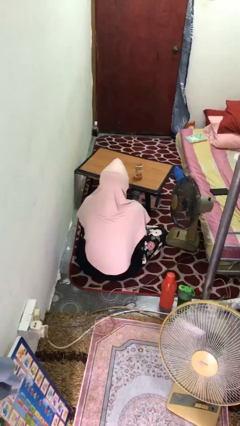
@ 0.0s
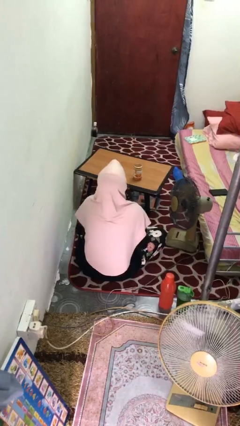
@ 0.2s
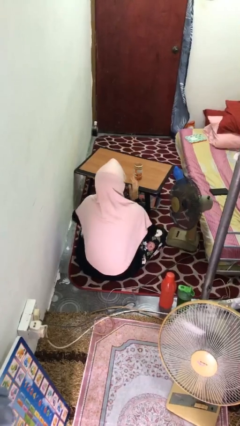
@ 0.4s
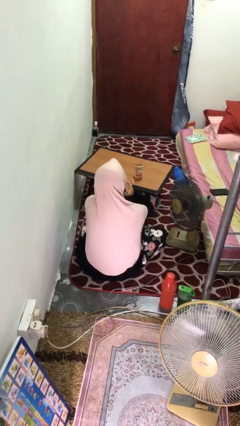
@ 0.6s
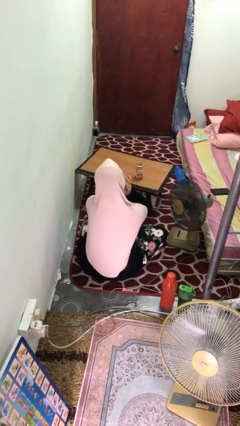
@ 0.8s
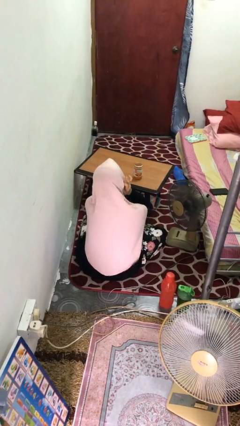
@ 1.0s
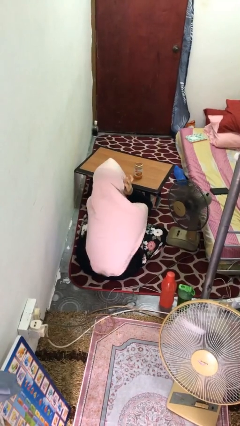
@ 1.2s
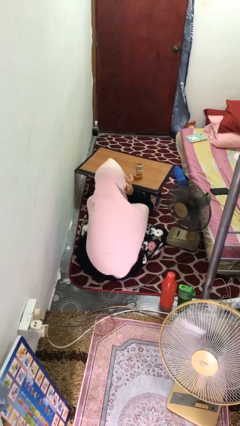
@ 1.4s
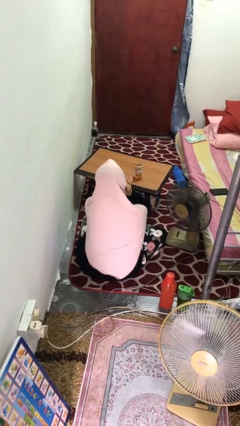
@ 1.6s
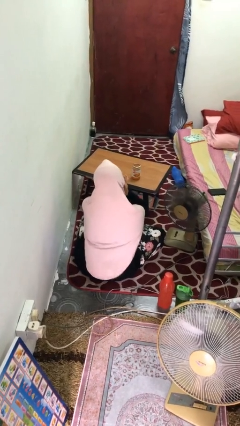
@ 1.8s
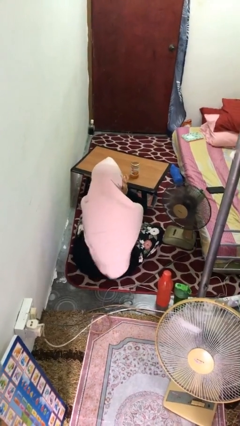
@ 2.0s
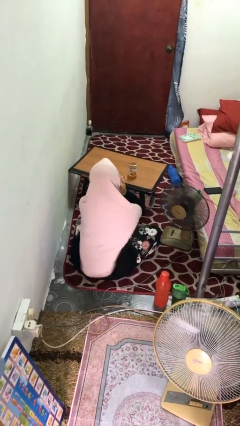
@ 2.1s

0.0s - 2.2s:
person puts fingers in ear

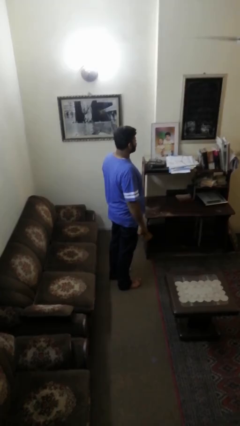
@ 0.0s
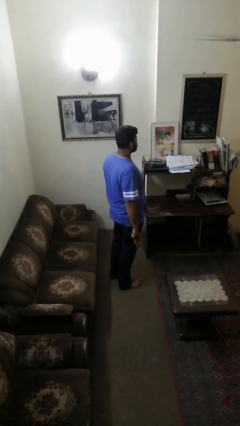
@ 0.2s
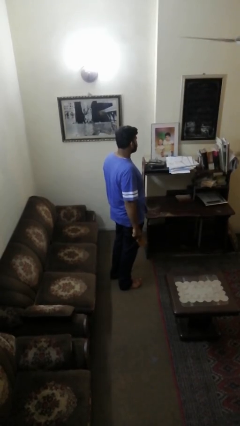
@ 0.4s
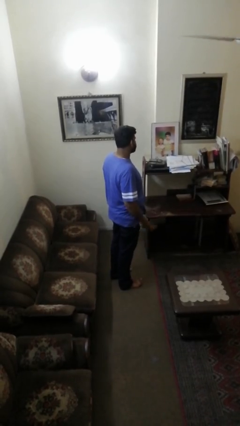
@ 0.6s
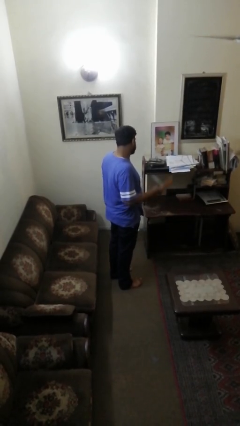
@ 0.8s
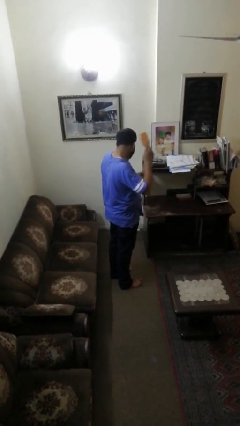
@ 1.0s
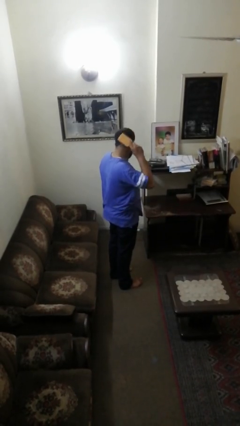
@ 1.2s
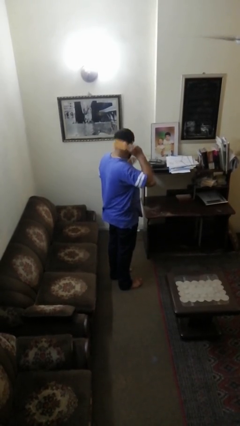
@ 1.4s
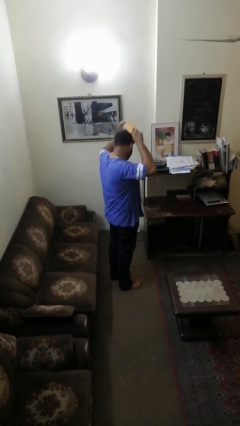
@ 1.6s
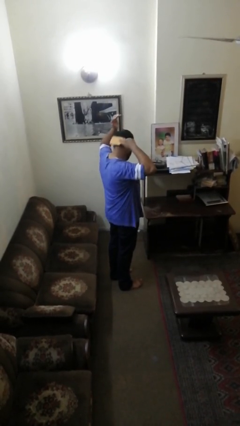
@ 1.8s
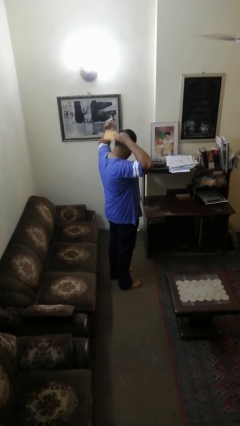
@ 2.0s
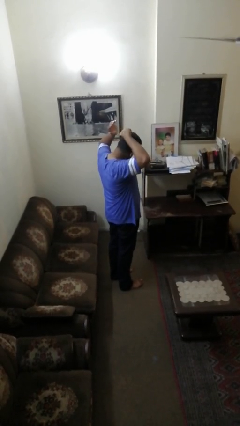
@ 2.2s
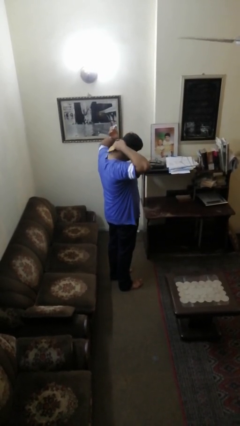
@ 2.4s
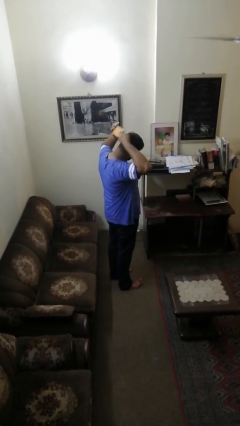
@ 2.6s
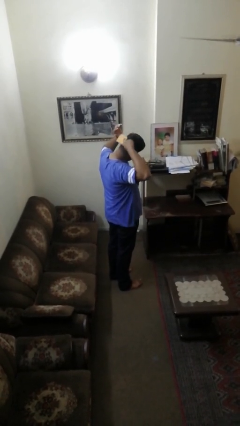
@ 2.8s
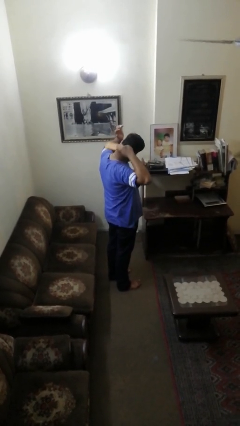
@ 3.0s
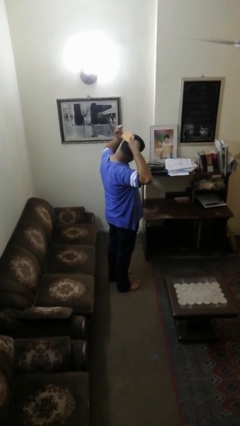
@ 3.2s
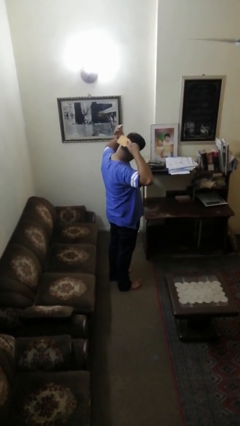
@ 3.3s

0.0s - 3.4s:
person brushes hair

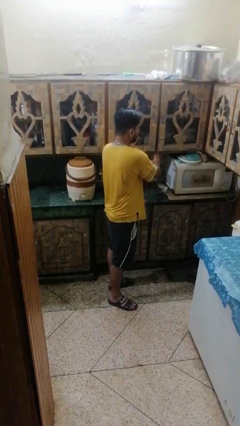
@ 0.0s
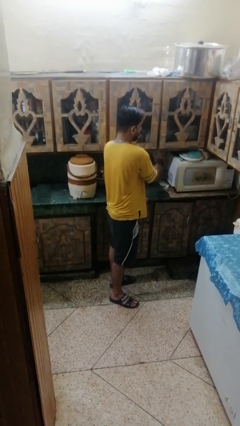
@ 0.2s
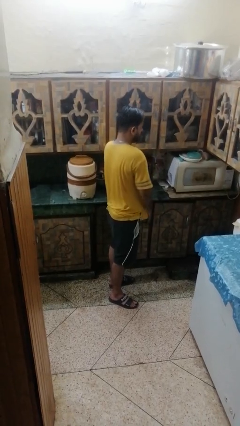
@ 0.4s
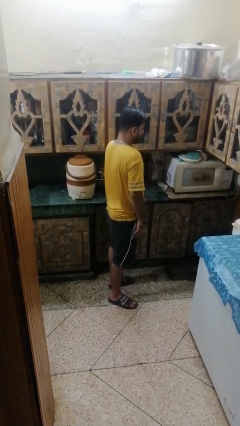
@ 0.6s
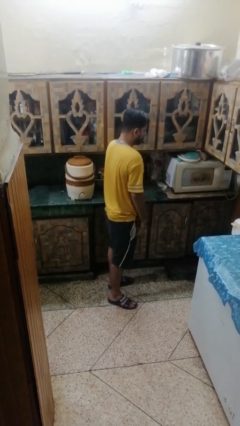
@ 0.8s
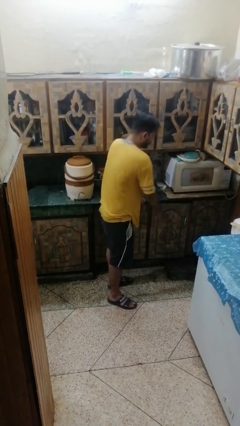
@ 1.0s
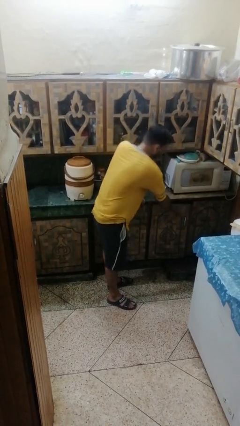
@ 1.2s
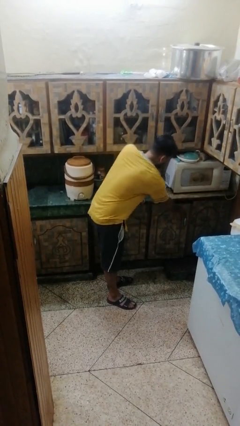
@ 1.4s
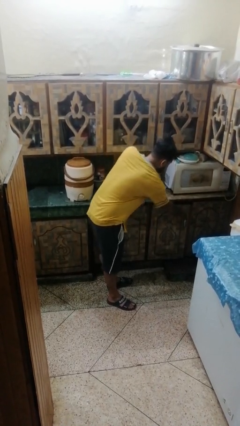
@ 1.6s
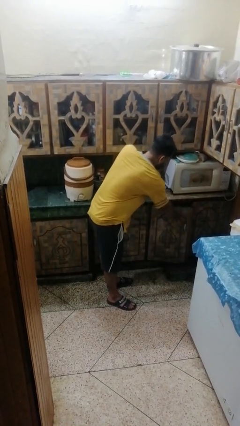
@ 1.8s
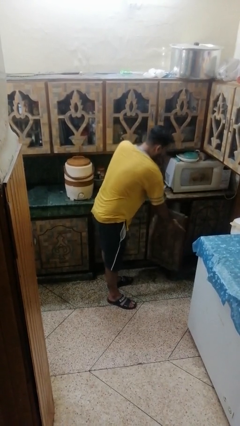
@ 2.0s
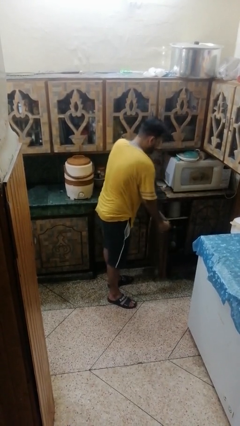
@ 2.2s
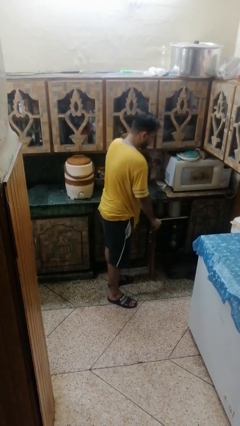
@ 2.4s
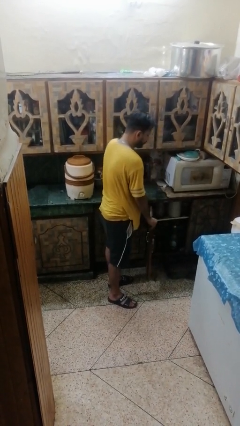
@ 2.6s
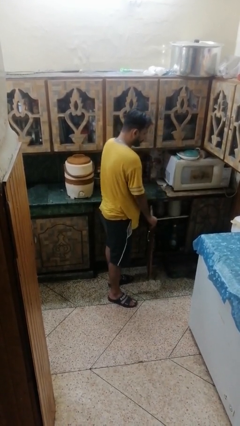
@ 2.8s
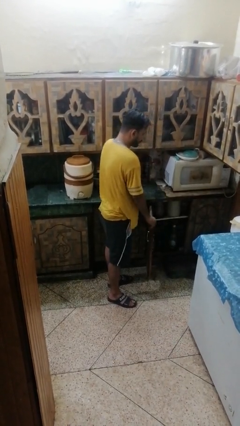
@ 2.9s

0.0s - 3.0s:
person closes cabinet

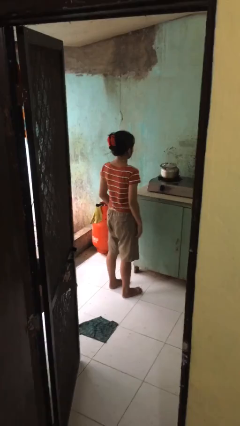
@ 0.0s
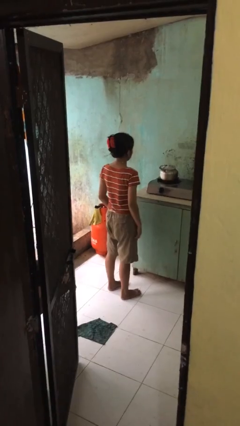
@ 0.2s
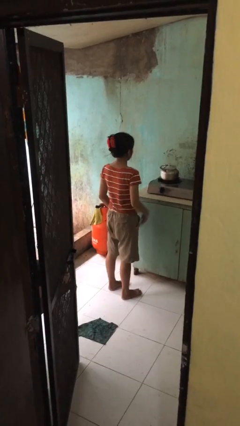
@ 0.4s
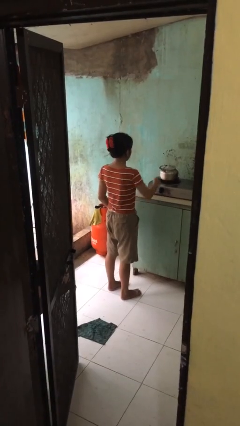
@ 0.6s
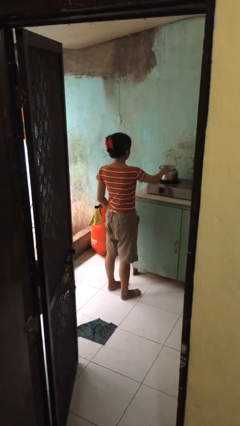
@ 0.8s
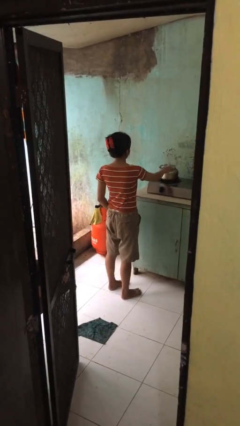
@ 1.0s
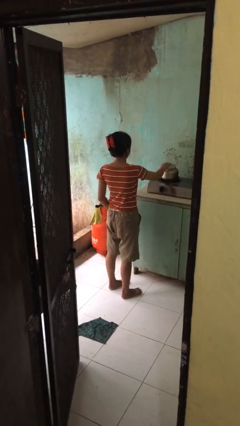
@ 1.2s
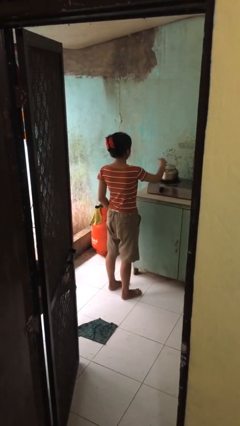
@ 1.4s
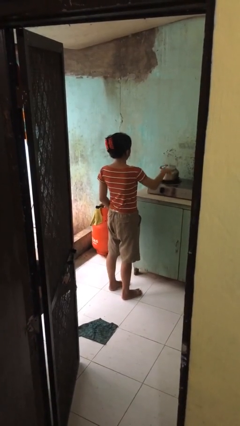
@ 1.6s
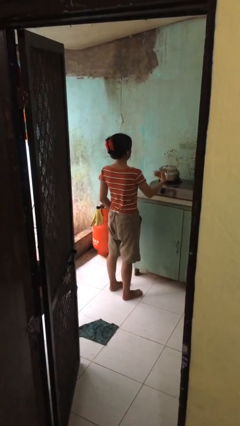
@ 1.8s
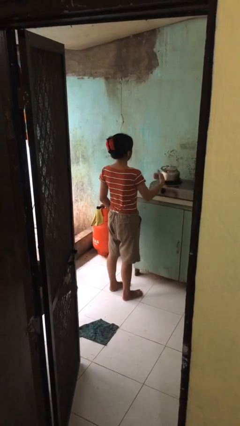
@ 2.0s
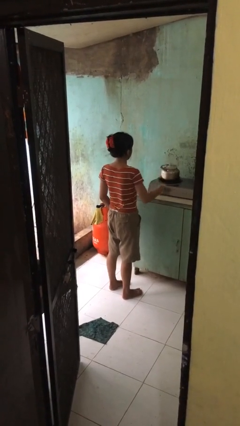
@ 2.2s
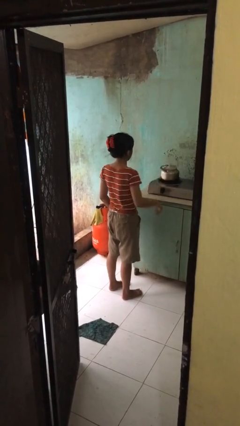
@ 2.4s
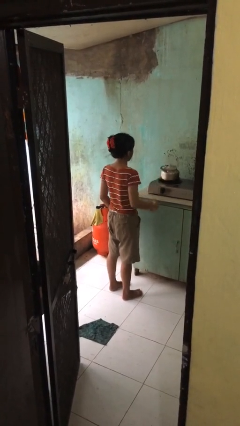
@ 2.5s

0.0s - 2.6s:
person burns hand

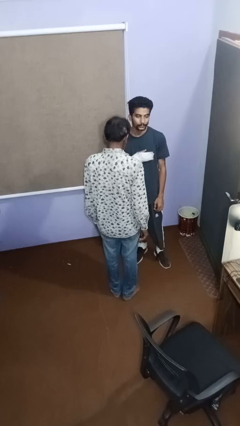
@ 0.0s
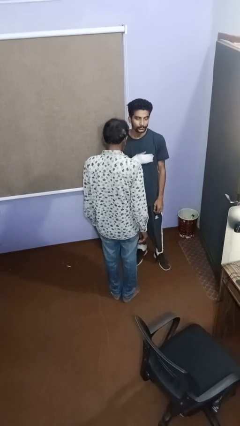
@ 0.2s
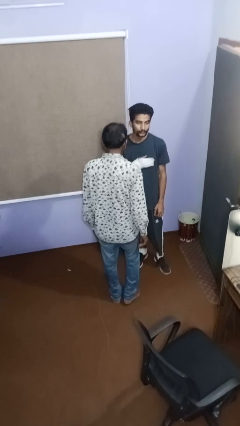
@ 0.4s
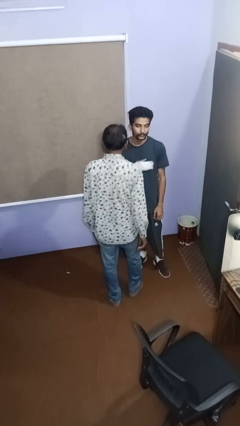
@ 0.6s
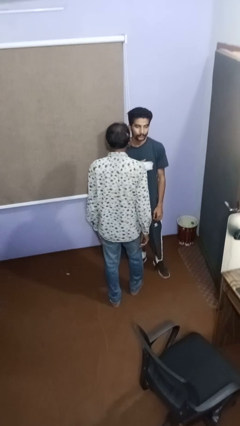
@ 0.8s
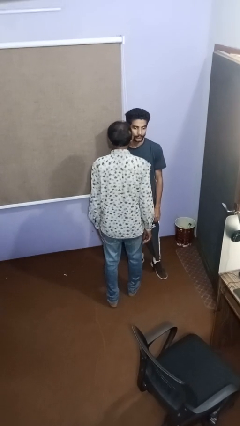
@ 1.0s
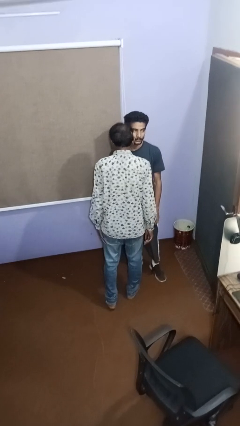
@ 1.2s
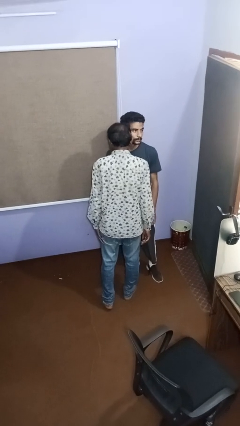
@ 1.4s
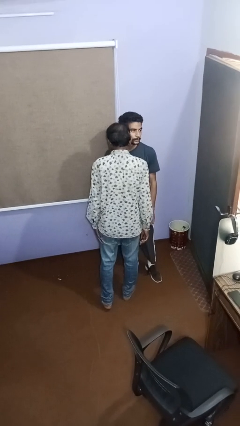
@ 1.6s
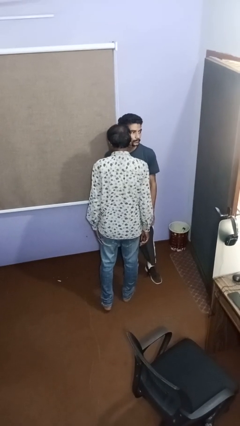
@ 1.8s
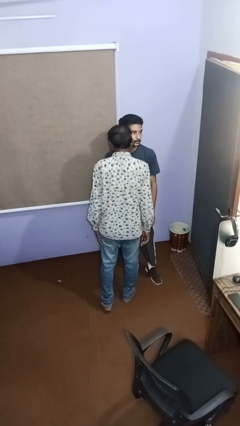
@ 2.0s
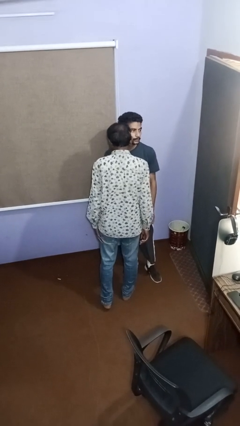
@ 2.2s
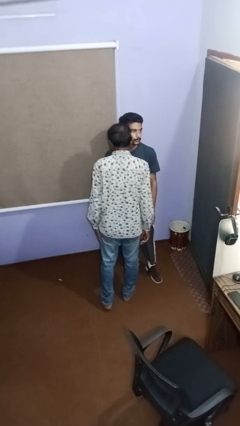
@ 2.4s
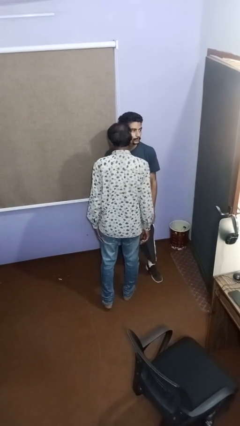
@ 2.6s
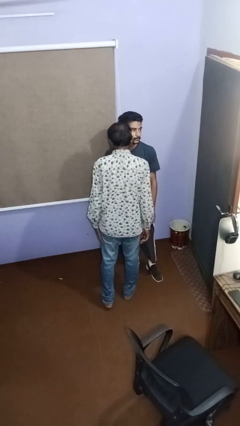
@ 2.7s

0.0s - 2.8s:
person kisses cheek of person

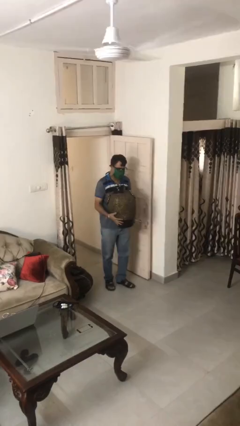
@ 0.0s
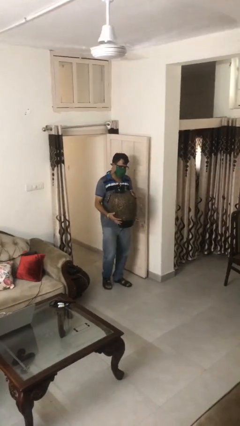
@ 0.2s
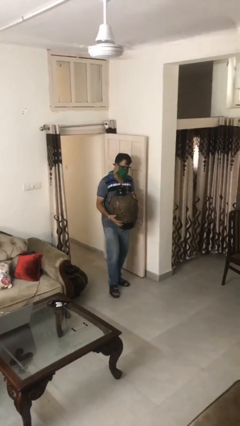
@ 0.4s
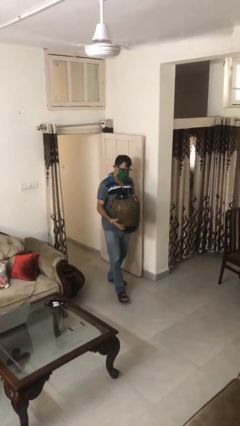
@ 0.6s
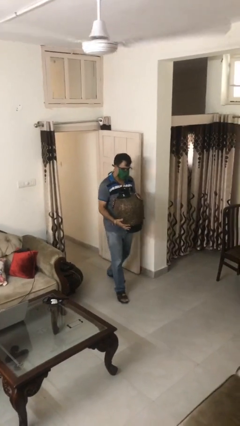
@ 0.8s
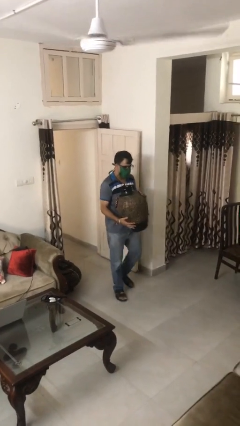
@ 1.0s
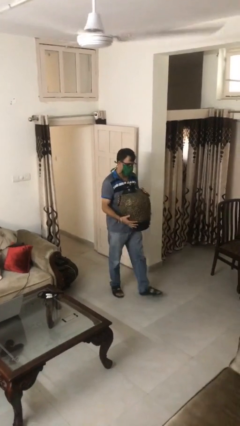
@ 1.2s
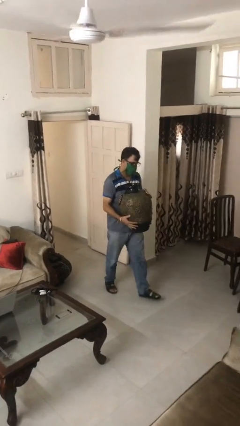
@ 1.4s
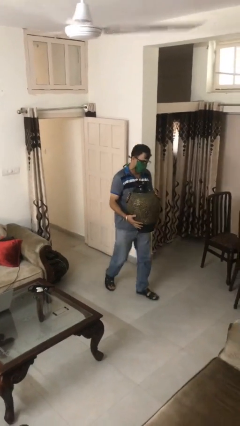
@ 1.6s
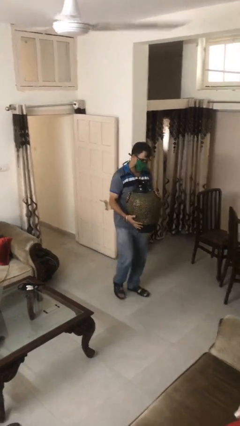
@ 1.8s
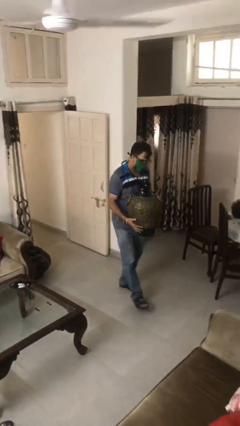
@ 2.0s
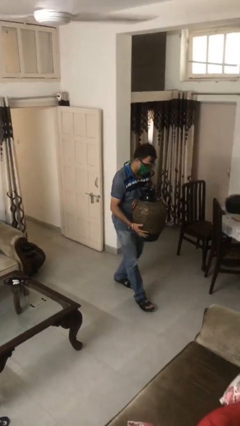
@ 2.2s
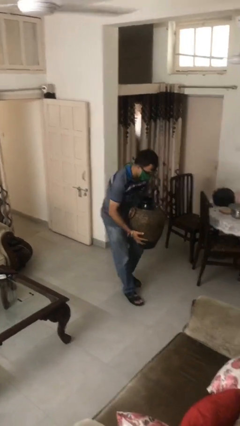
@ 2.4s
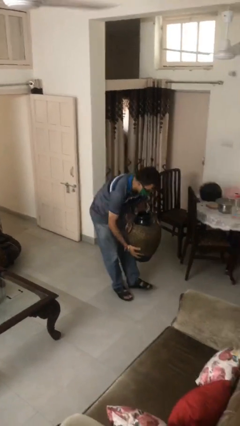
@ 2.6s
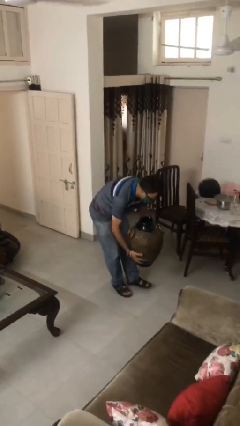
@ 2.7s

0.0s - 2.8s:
person carries heavy object

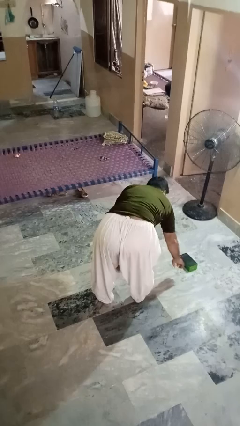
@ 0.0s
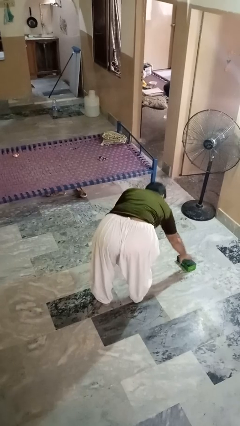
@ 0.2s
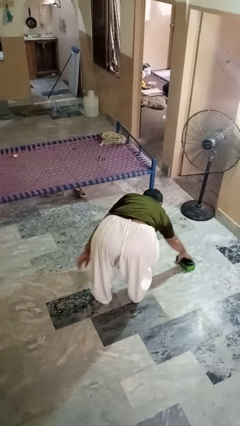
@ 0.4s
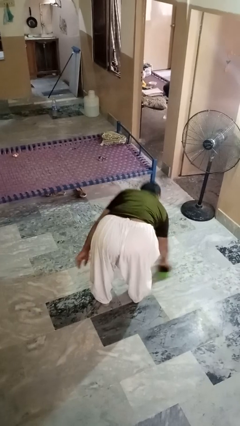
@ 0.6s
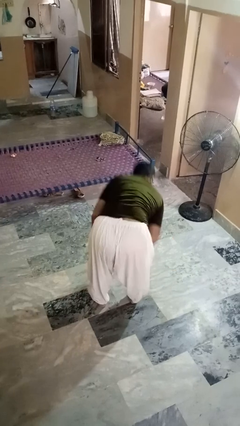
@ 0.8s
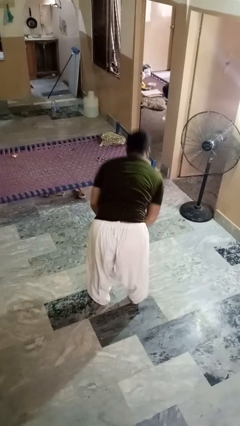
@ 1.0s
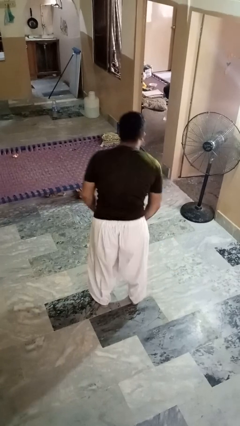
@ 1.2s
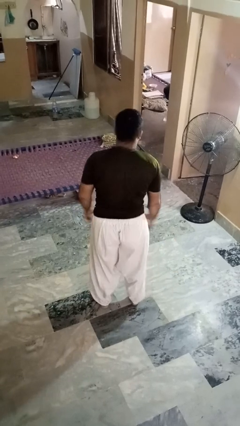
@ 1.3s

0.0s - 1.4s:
person picks up object from floor
